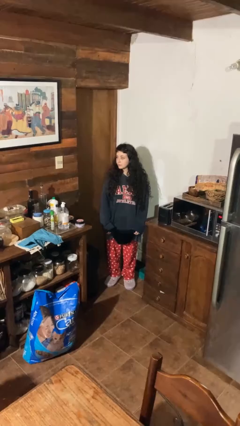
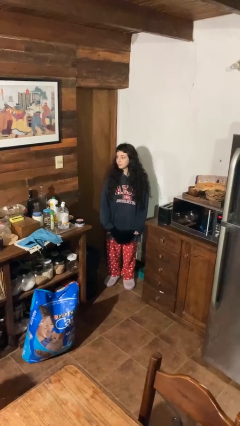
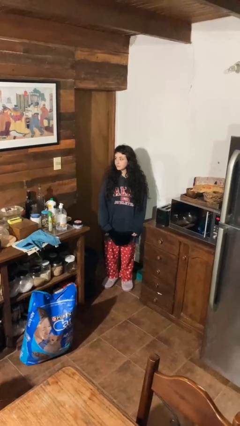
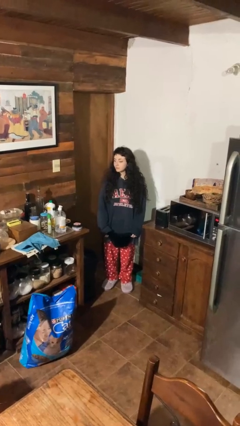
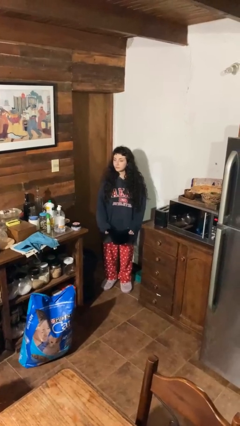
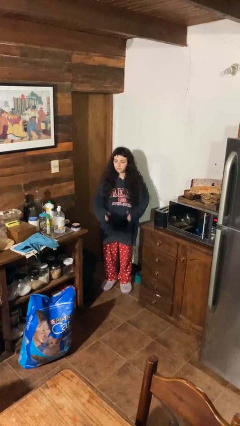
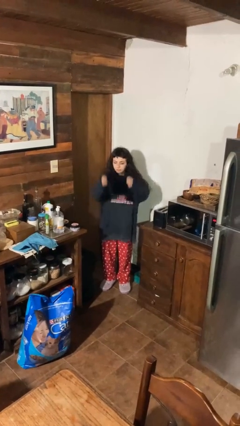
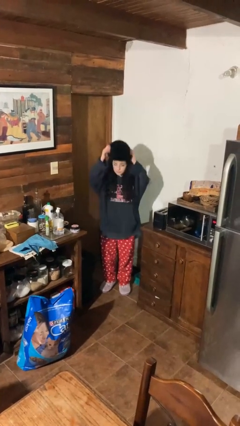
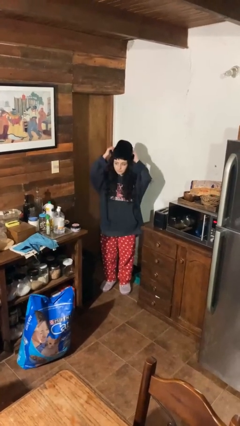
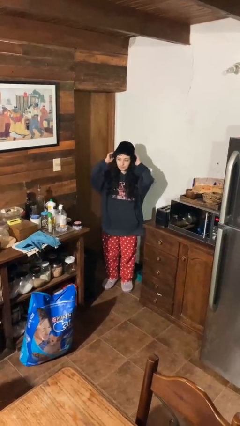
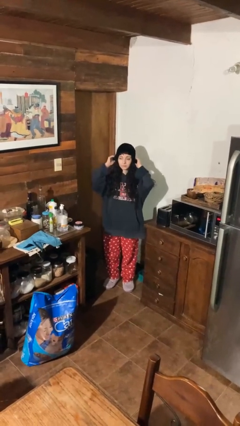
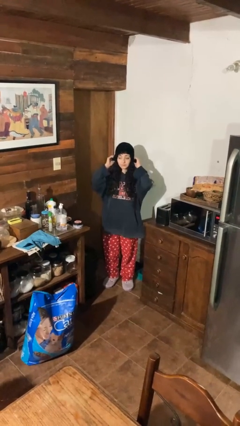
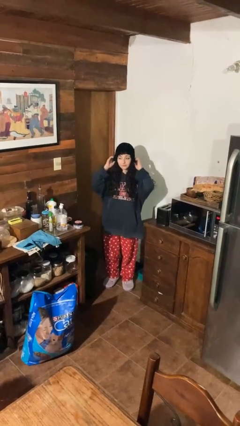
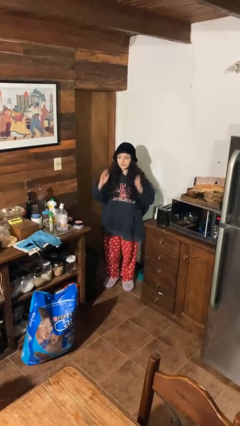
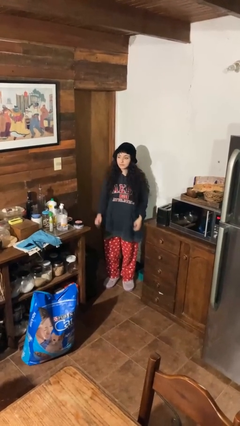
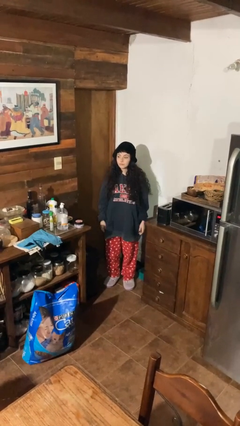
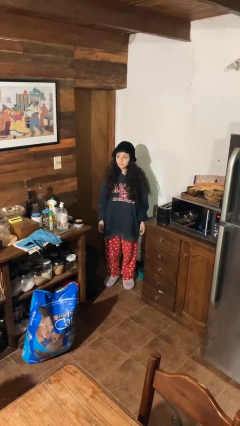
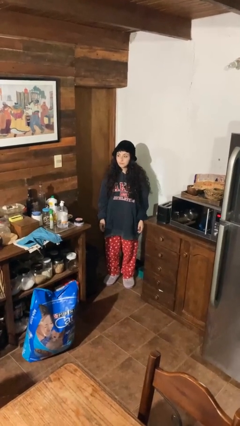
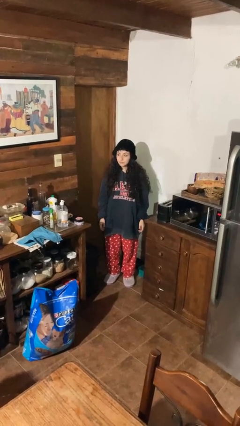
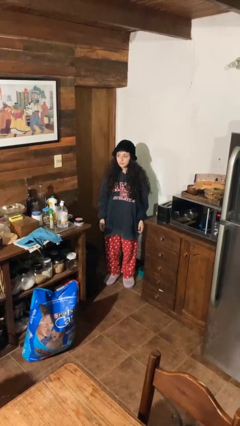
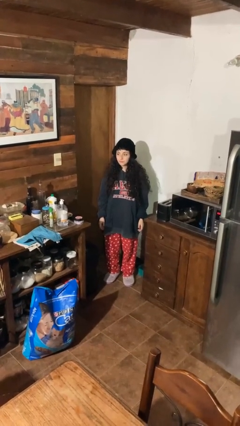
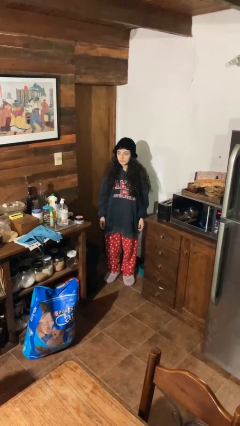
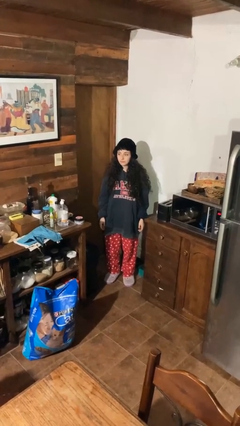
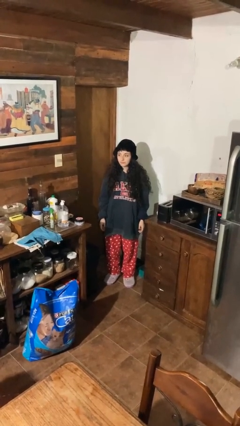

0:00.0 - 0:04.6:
person puts on hat

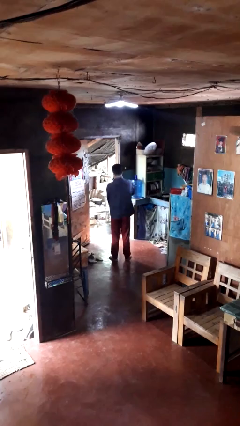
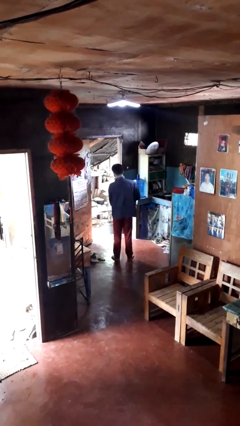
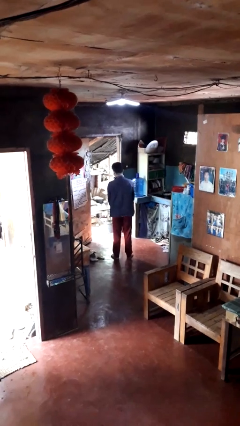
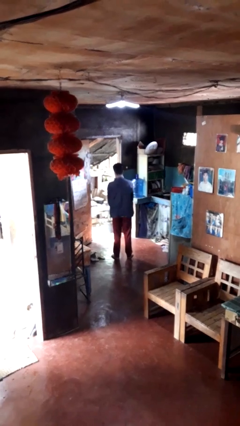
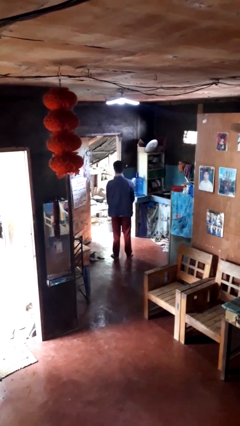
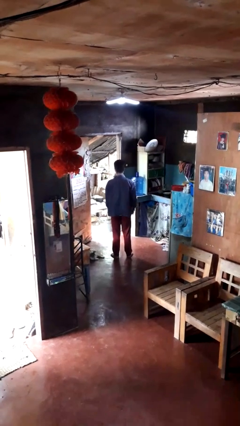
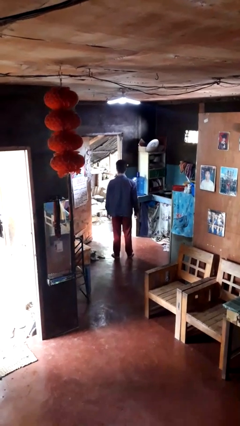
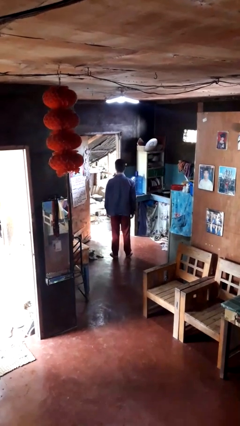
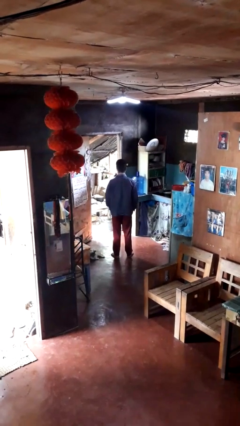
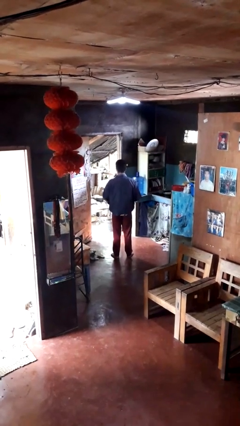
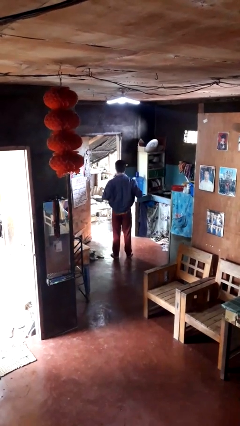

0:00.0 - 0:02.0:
person unzips jacket

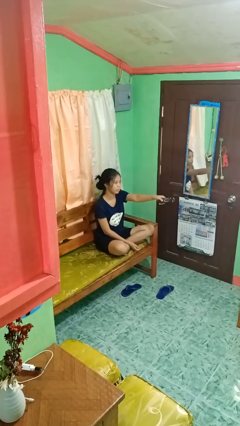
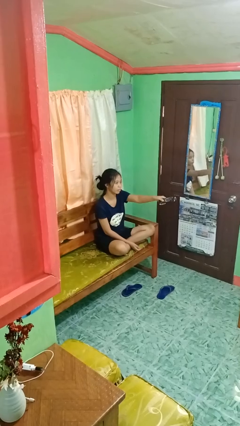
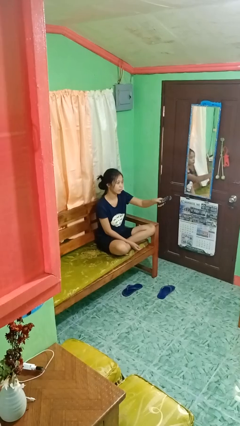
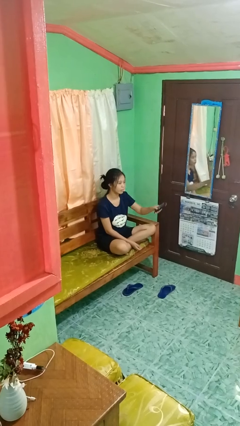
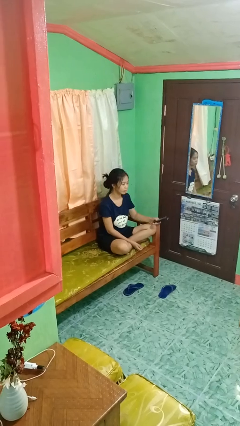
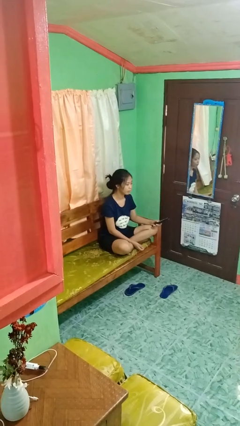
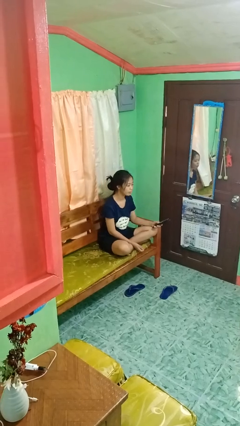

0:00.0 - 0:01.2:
person uses television remote

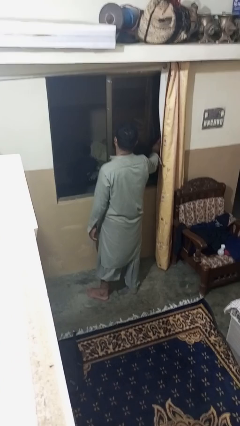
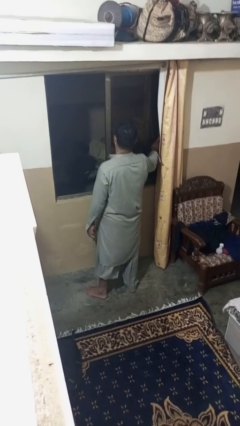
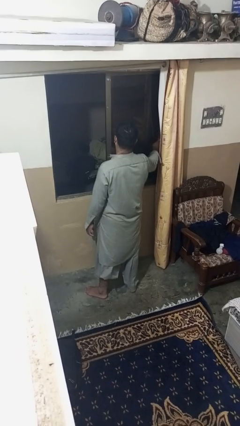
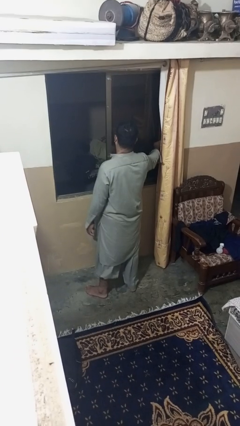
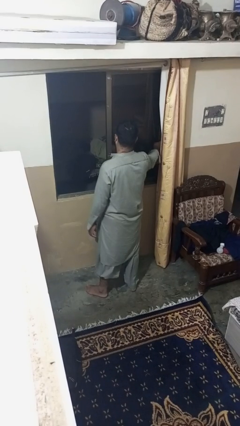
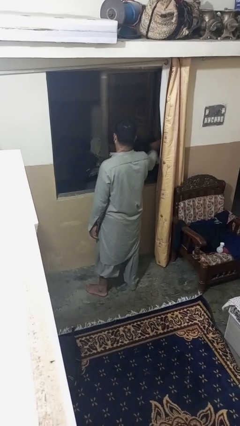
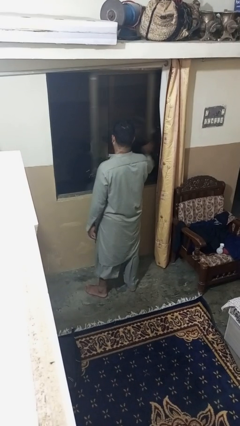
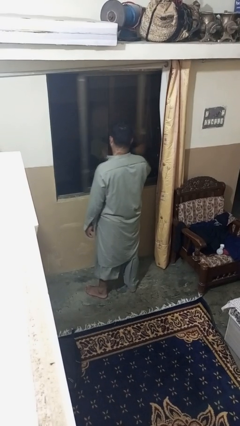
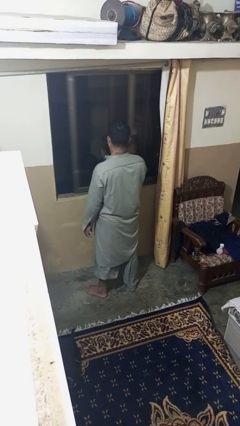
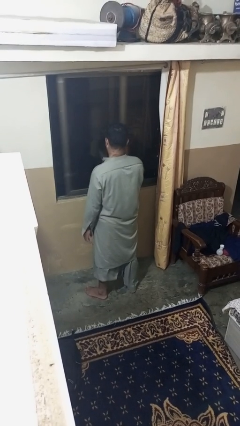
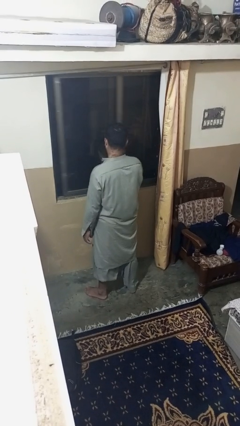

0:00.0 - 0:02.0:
person closes home window

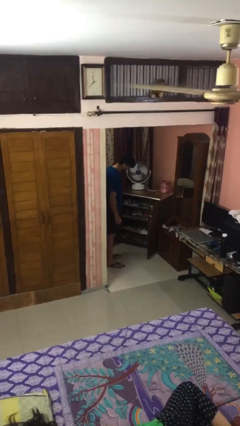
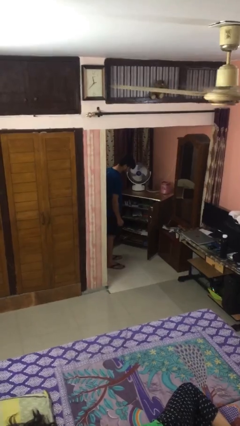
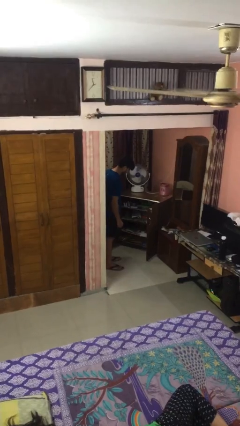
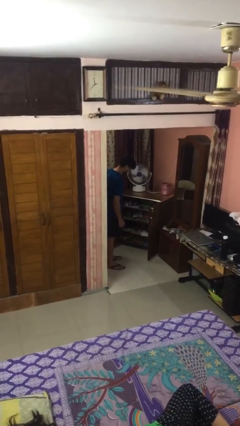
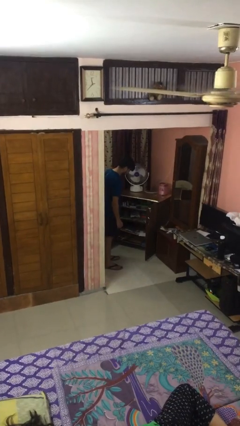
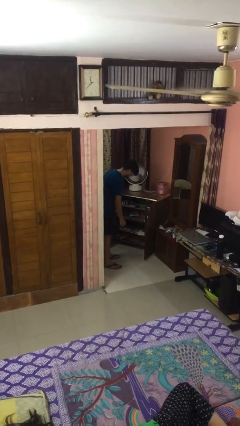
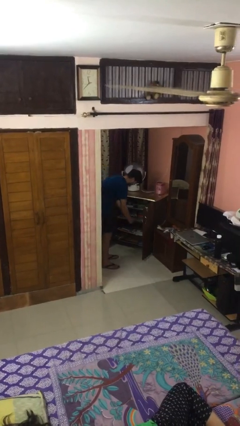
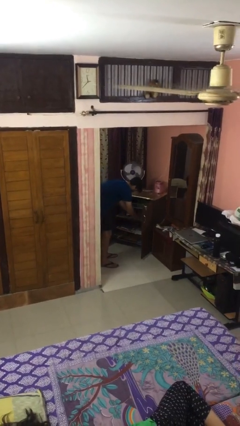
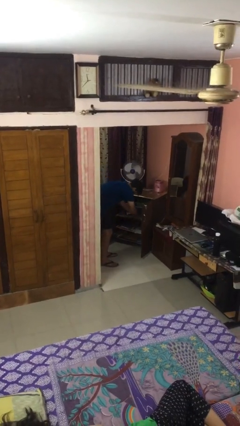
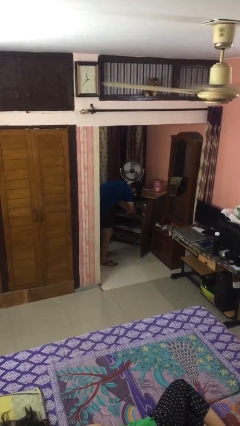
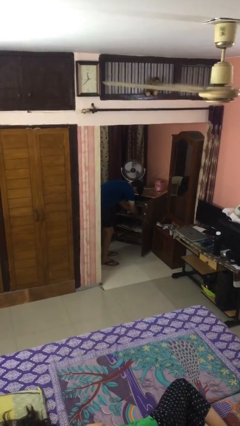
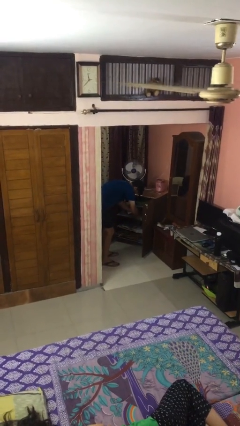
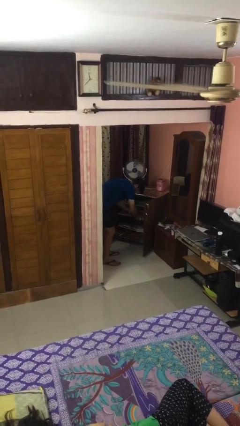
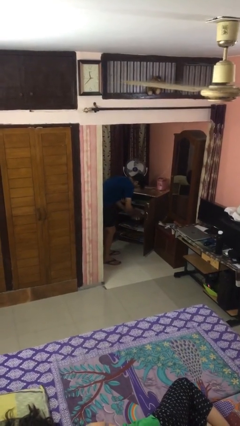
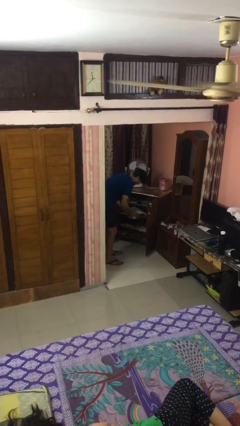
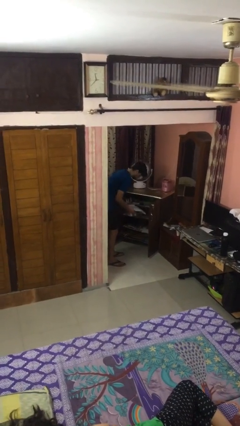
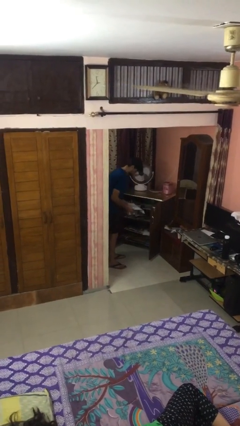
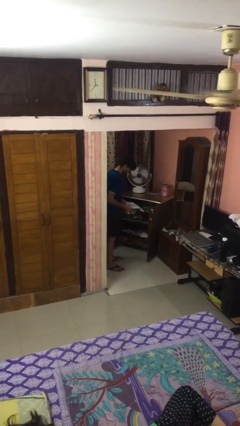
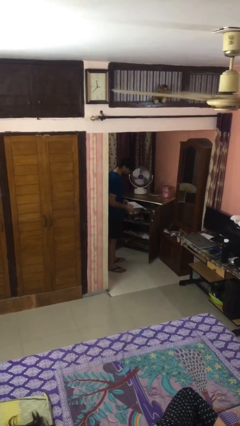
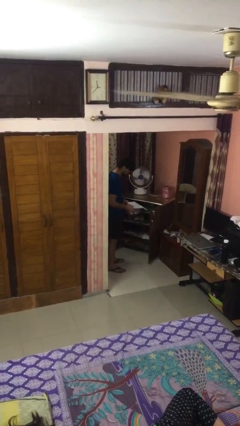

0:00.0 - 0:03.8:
person picks up object from cabinet

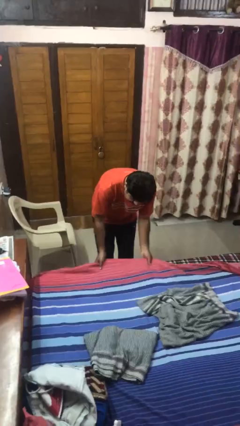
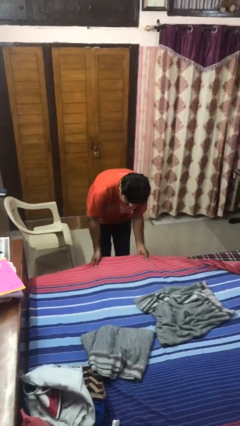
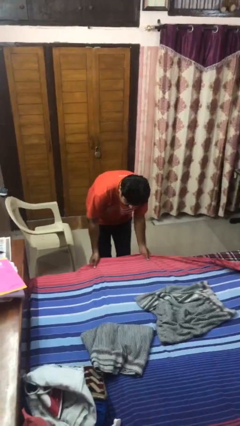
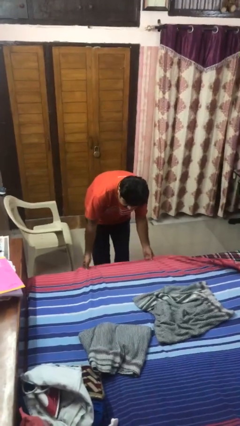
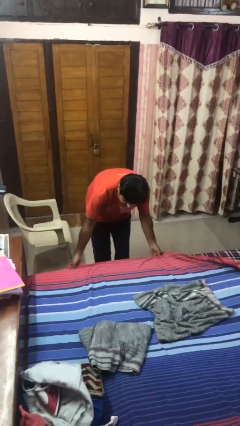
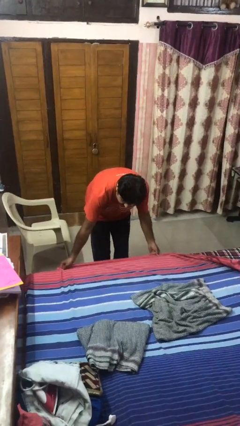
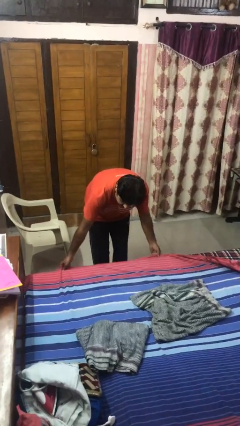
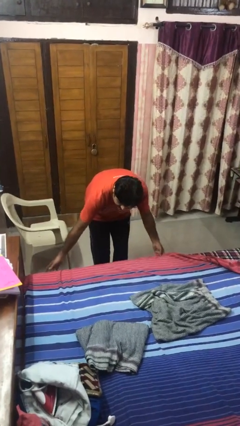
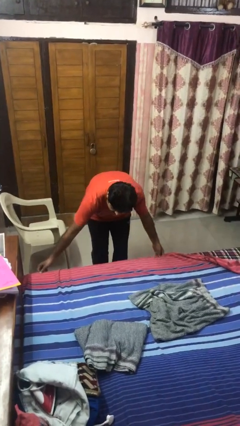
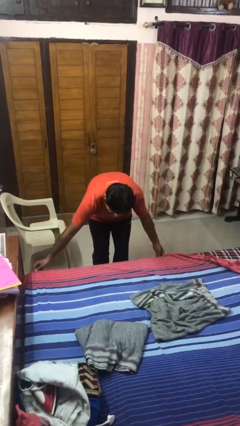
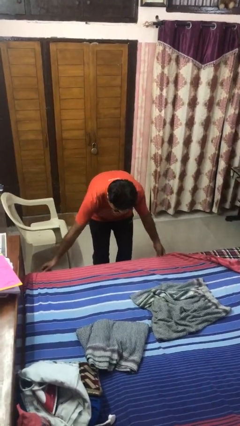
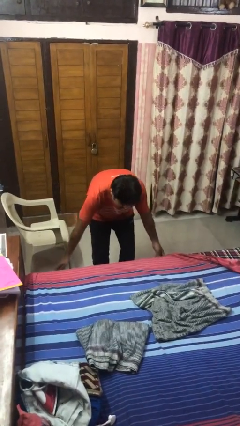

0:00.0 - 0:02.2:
person makes bed

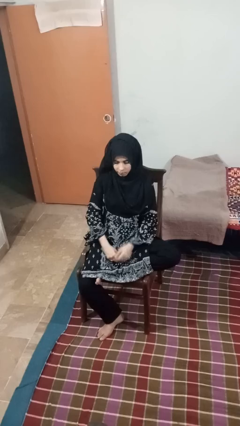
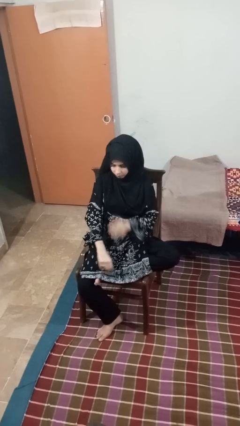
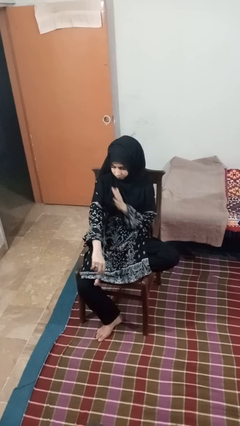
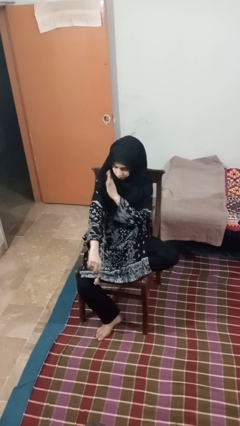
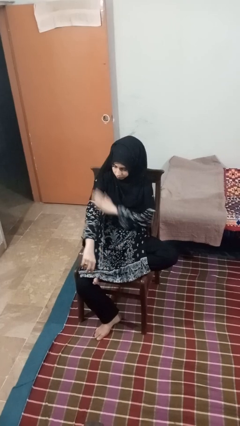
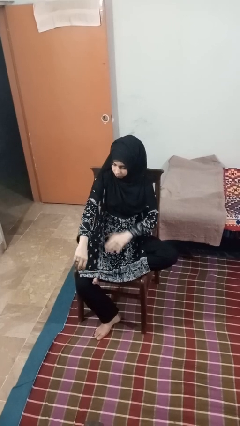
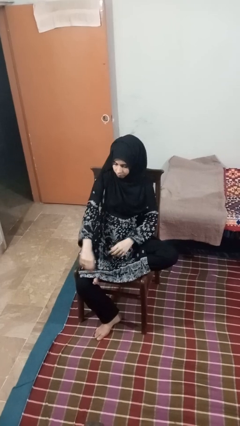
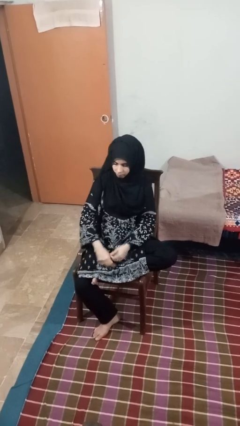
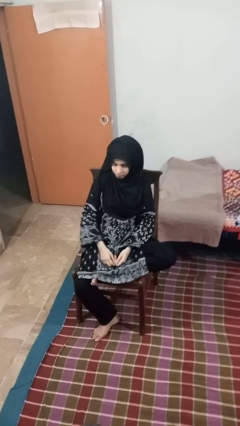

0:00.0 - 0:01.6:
person swats bug
